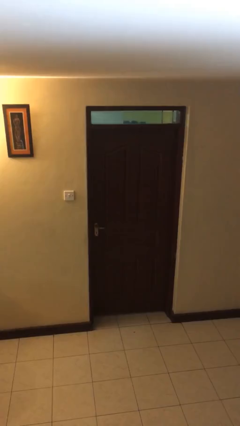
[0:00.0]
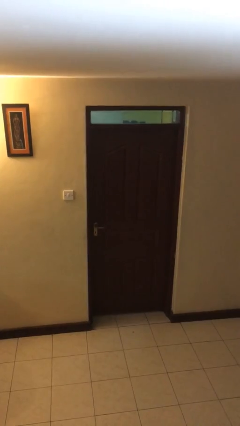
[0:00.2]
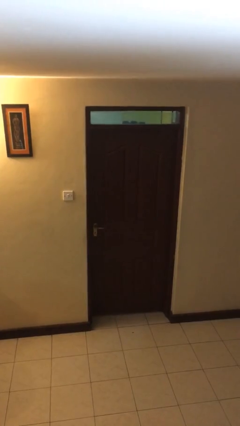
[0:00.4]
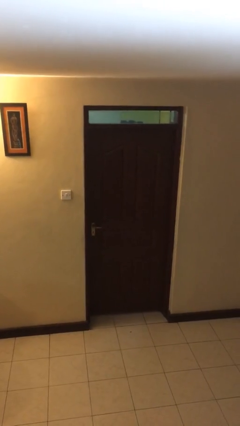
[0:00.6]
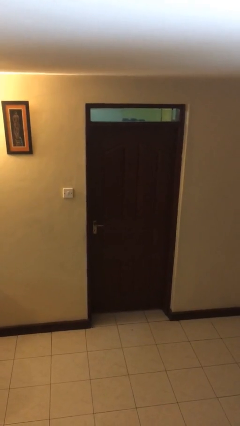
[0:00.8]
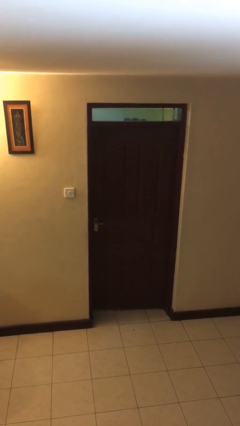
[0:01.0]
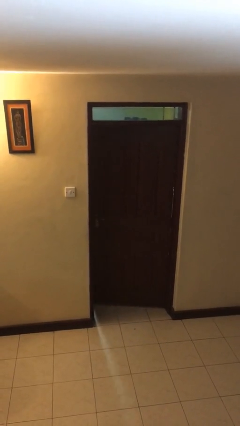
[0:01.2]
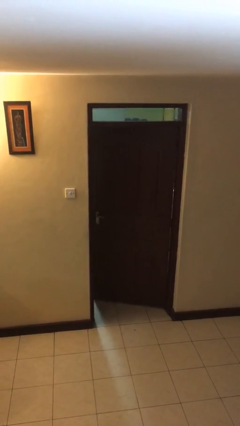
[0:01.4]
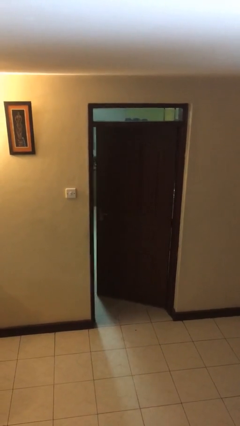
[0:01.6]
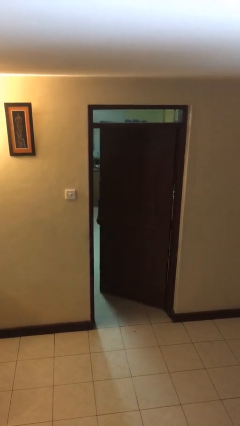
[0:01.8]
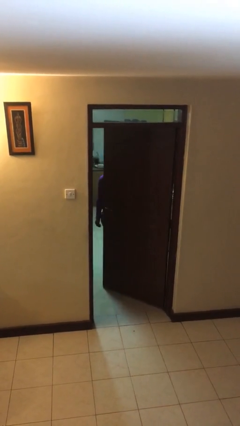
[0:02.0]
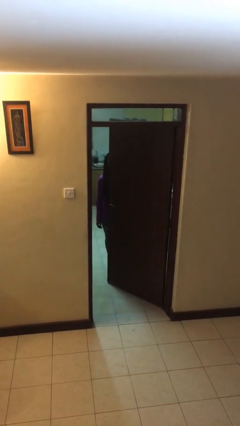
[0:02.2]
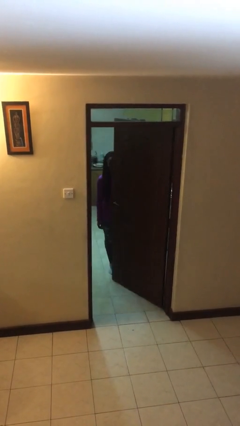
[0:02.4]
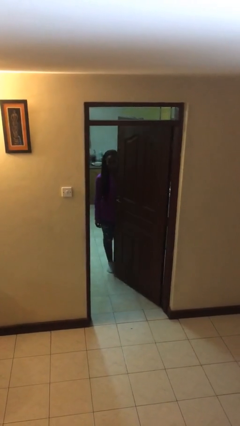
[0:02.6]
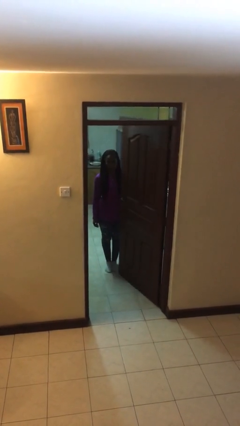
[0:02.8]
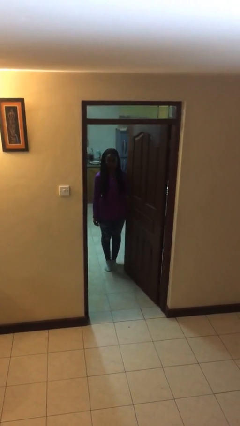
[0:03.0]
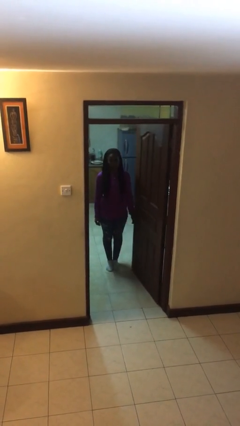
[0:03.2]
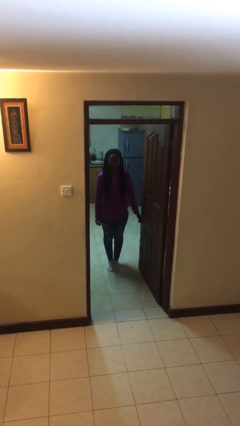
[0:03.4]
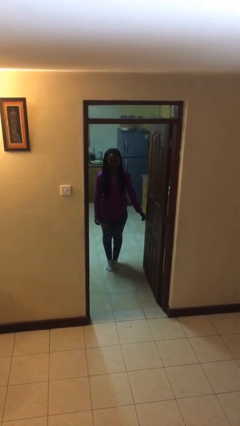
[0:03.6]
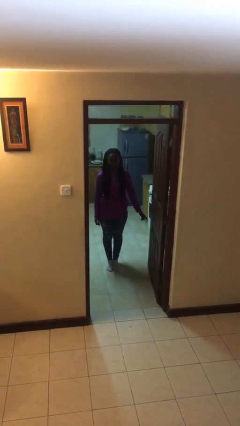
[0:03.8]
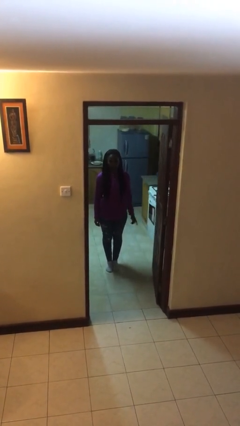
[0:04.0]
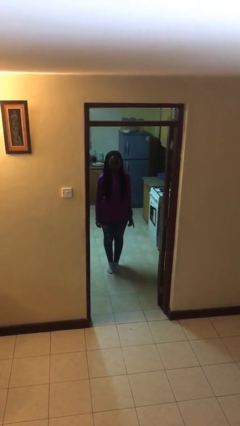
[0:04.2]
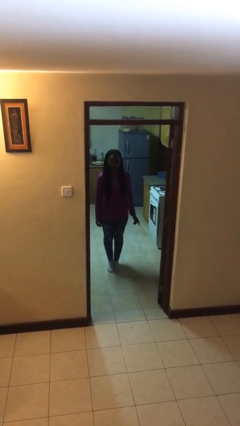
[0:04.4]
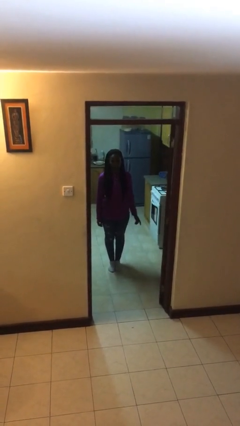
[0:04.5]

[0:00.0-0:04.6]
person opens facility door

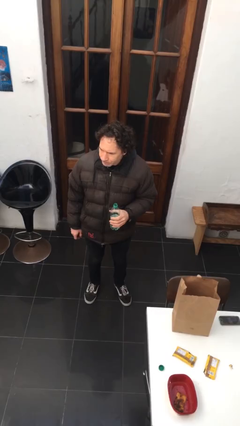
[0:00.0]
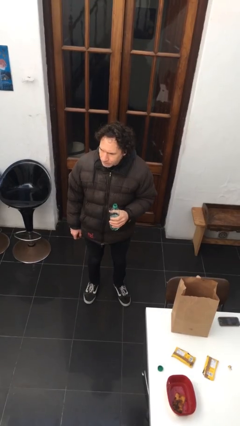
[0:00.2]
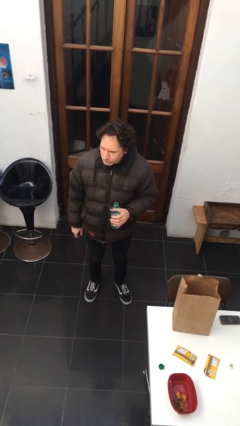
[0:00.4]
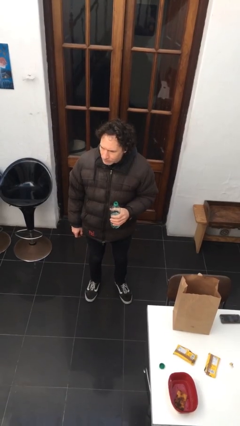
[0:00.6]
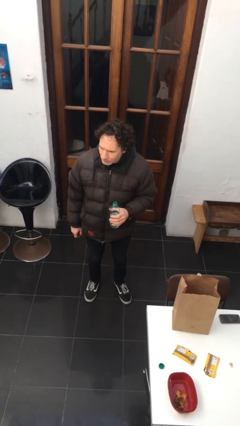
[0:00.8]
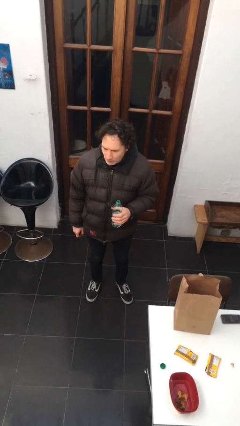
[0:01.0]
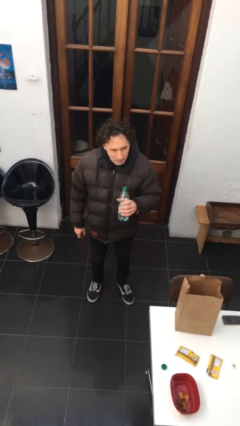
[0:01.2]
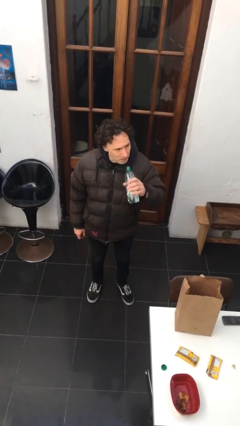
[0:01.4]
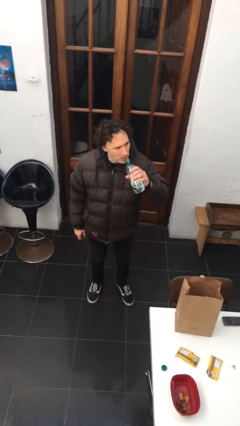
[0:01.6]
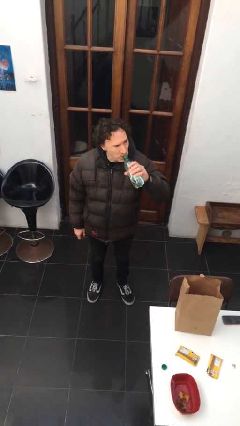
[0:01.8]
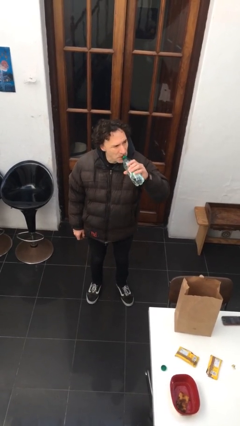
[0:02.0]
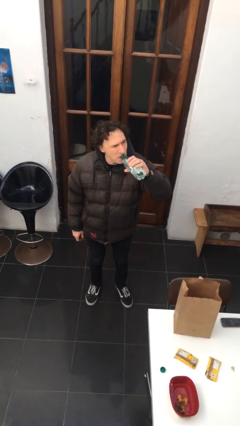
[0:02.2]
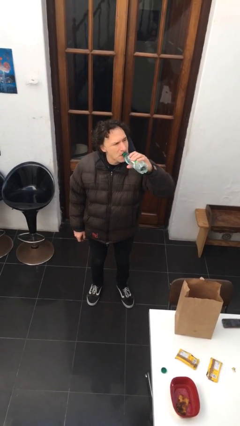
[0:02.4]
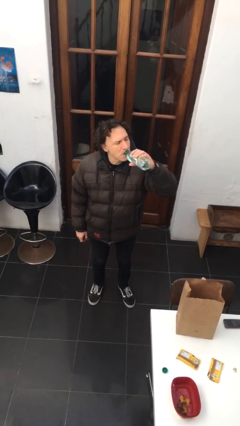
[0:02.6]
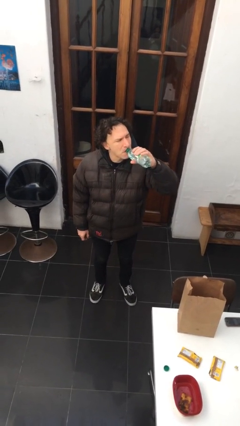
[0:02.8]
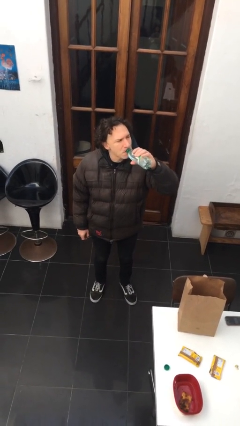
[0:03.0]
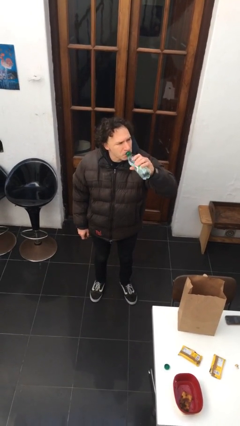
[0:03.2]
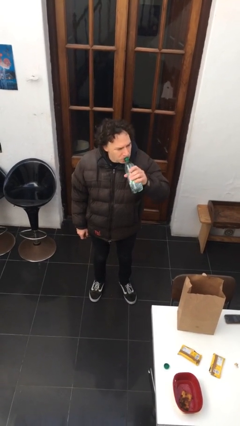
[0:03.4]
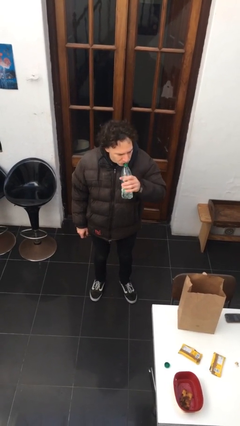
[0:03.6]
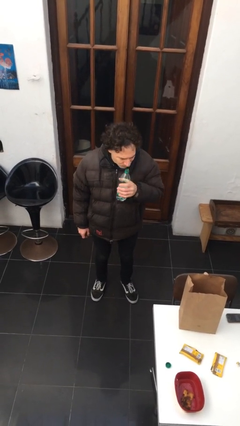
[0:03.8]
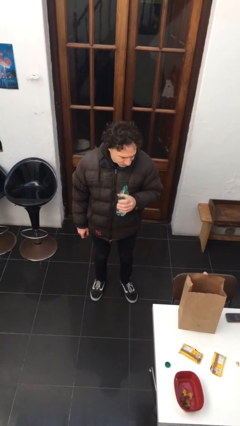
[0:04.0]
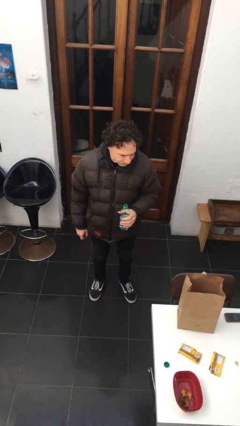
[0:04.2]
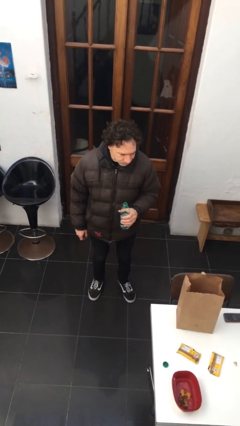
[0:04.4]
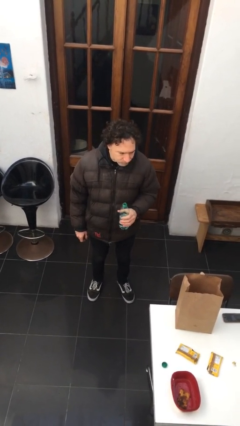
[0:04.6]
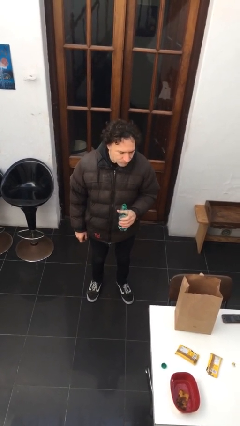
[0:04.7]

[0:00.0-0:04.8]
person drinks from bottle

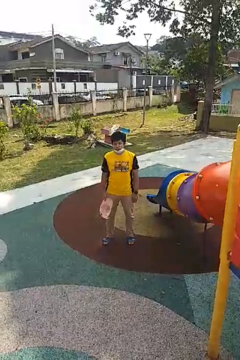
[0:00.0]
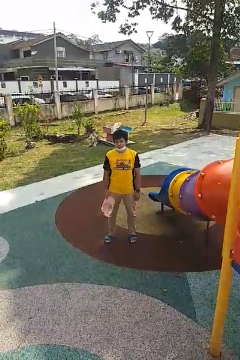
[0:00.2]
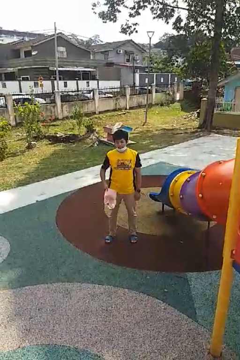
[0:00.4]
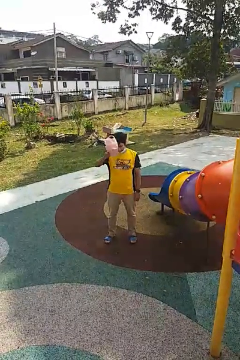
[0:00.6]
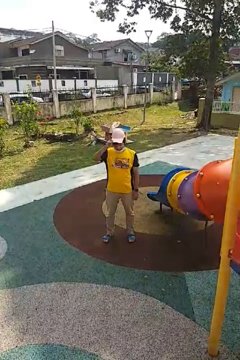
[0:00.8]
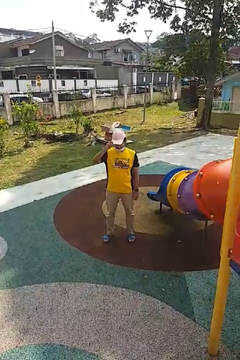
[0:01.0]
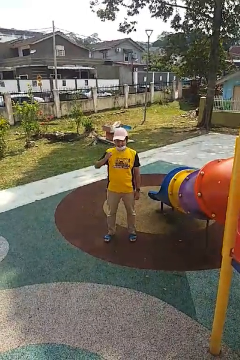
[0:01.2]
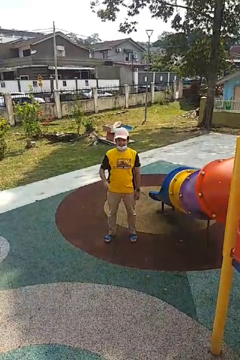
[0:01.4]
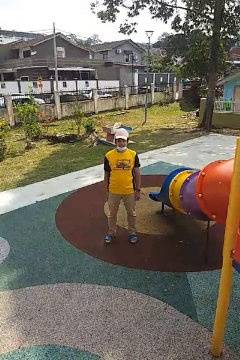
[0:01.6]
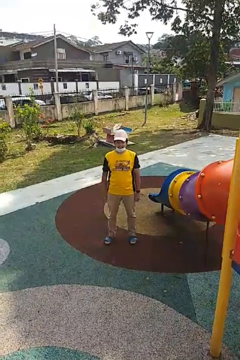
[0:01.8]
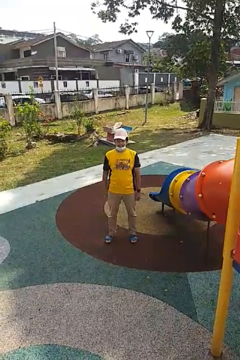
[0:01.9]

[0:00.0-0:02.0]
person puts on hat

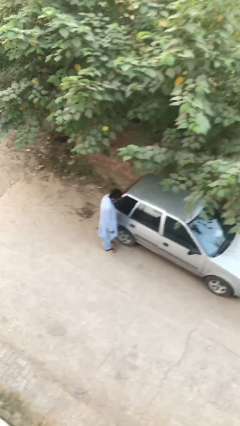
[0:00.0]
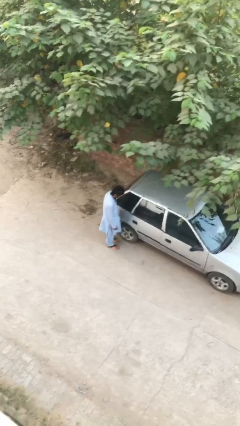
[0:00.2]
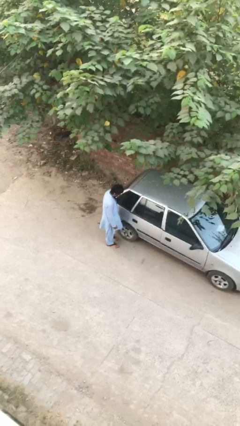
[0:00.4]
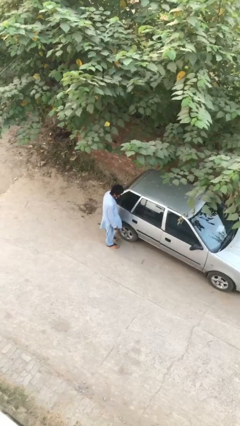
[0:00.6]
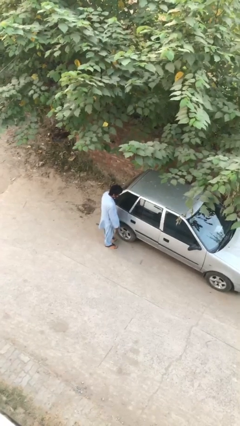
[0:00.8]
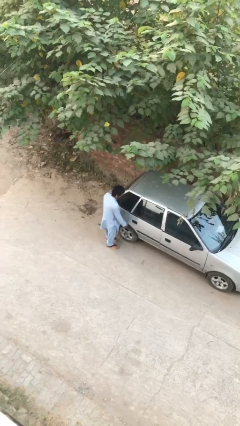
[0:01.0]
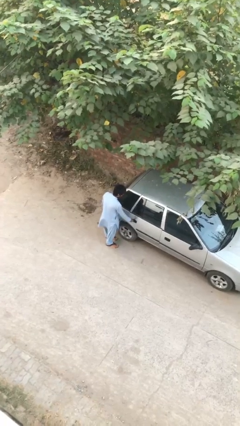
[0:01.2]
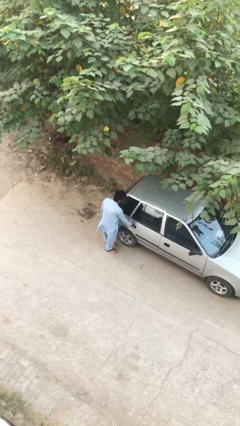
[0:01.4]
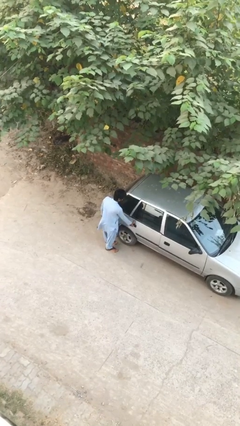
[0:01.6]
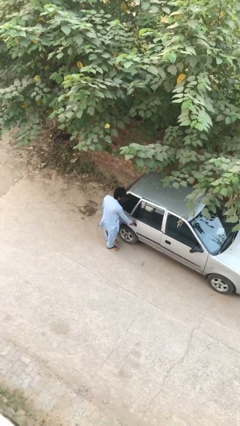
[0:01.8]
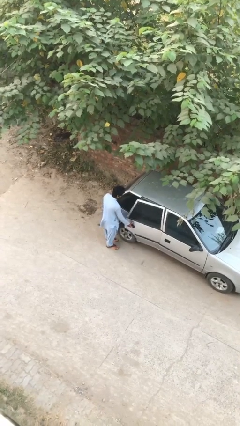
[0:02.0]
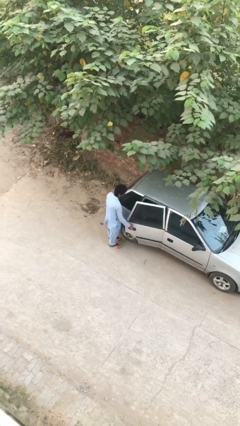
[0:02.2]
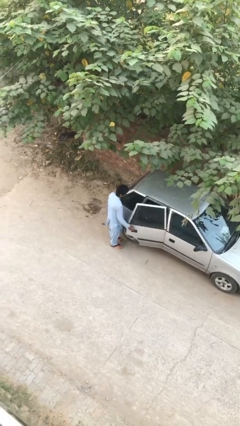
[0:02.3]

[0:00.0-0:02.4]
person opens car door

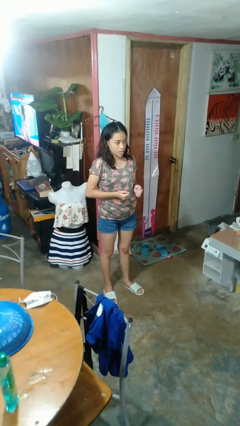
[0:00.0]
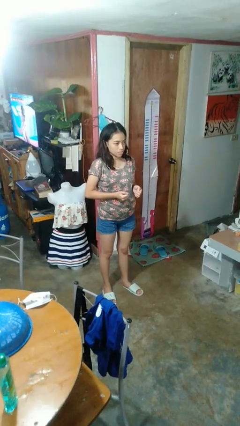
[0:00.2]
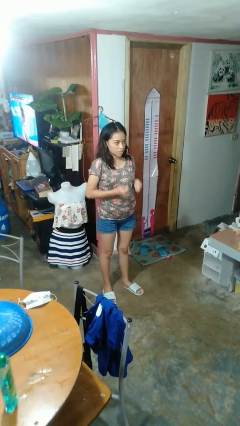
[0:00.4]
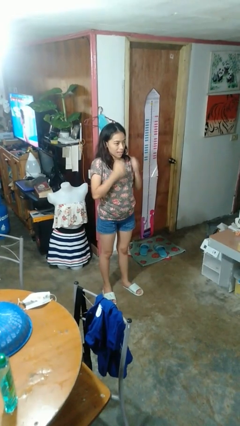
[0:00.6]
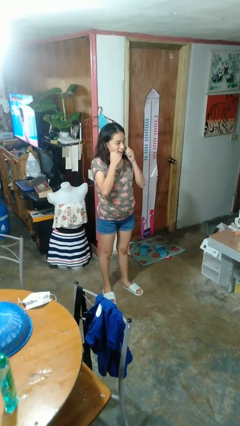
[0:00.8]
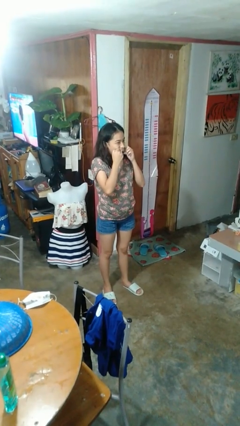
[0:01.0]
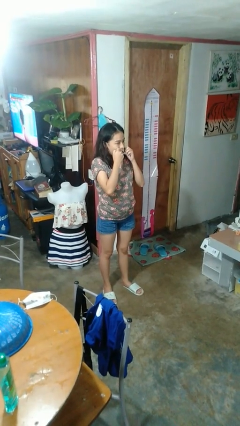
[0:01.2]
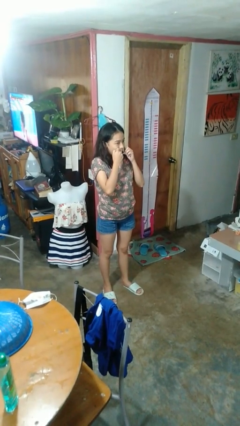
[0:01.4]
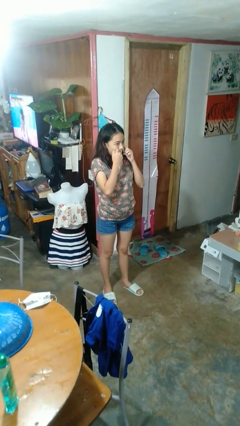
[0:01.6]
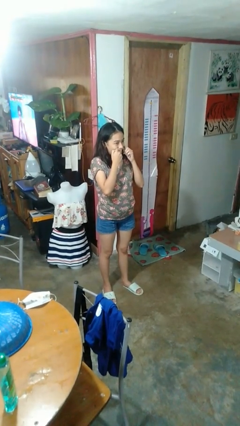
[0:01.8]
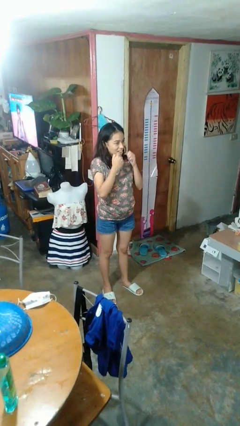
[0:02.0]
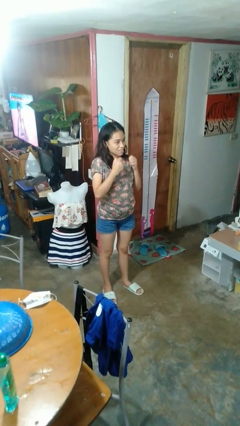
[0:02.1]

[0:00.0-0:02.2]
person flosses

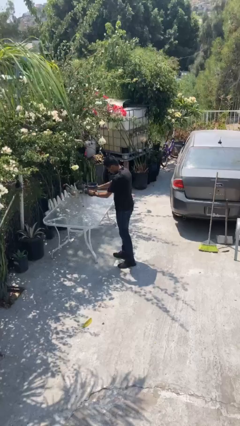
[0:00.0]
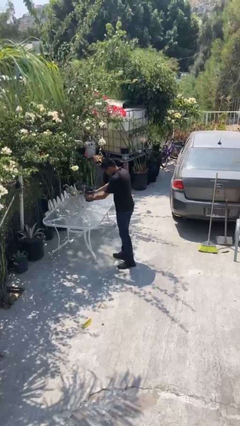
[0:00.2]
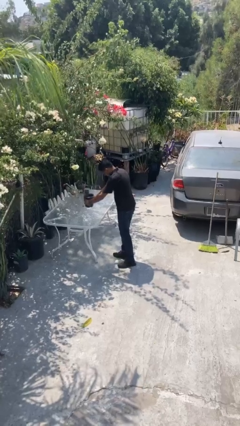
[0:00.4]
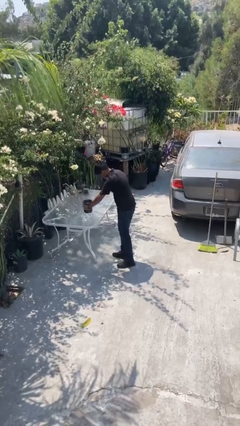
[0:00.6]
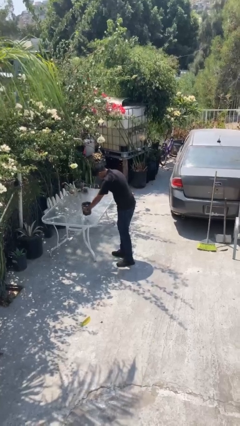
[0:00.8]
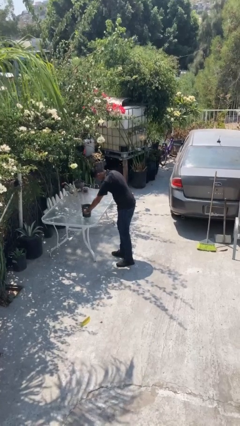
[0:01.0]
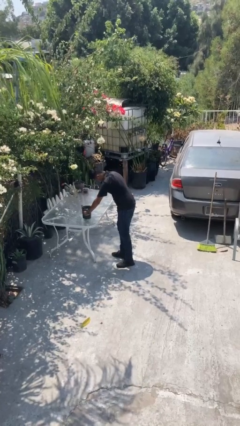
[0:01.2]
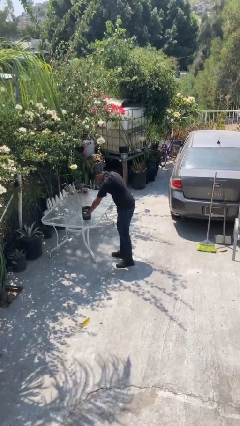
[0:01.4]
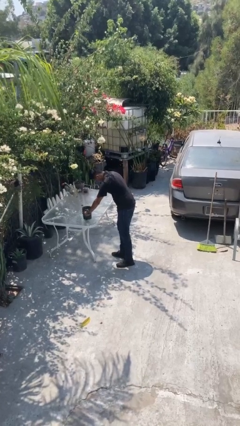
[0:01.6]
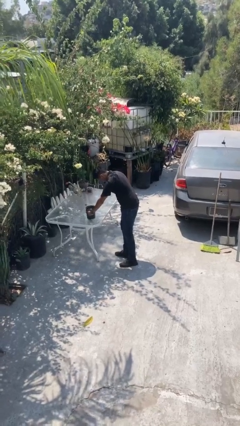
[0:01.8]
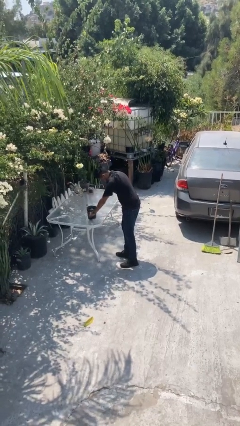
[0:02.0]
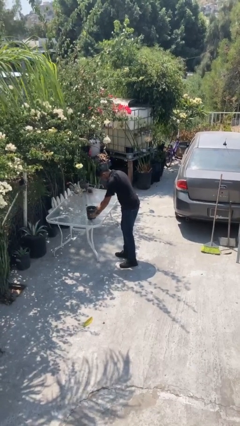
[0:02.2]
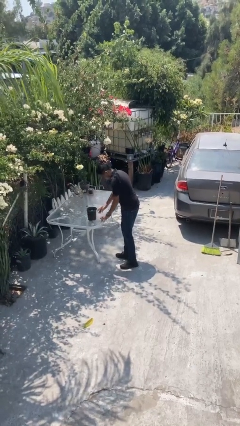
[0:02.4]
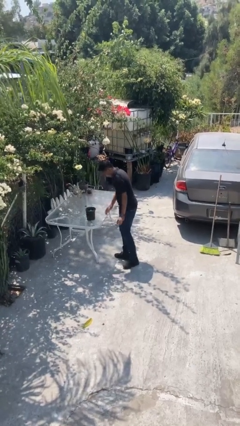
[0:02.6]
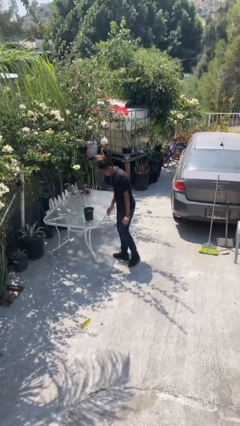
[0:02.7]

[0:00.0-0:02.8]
person puts down object on table
